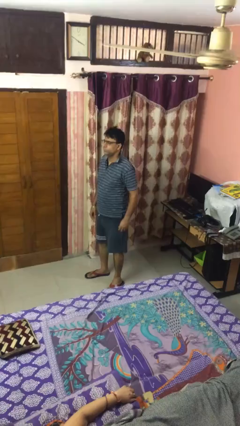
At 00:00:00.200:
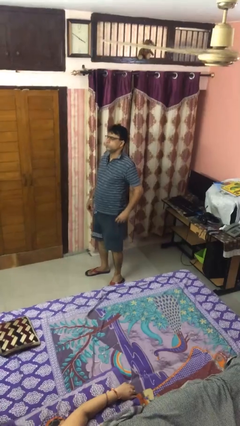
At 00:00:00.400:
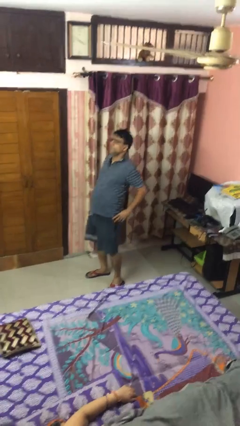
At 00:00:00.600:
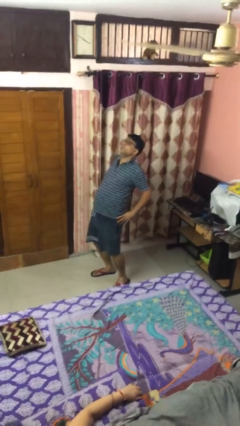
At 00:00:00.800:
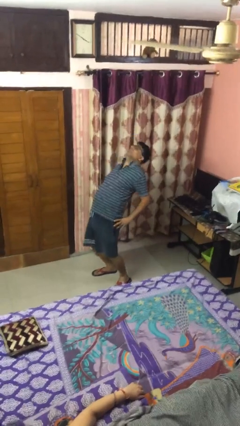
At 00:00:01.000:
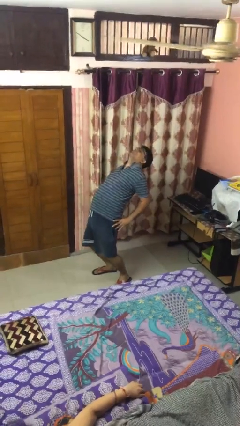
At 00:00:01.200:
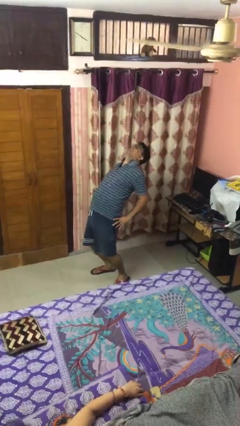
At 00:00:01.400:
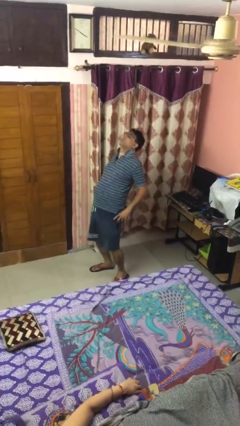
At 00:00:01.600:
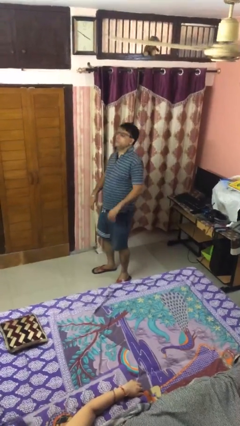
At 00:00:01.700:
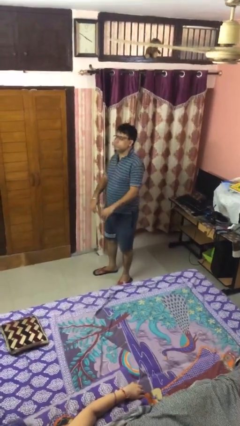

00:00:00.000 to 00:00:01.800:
person stretches back

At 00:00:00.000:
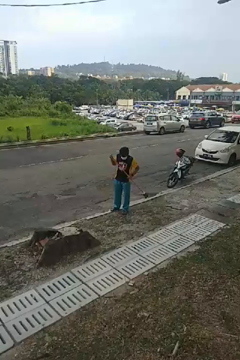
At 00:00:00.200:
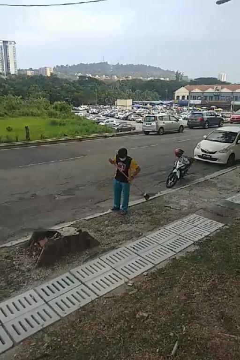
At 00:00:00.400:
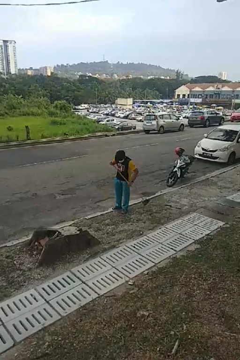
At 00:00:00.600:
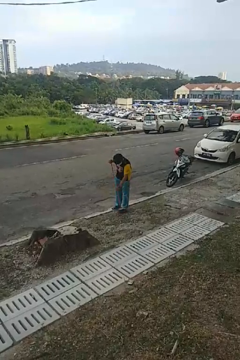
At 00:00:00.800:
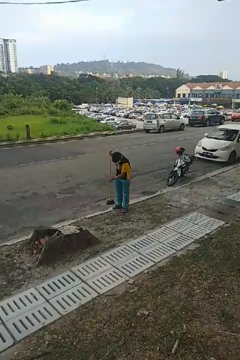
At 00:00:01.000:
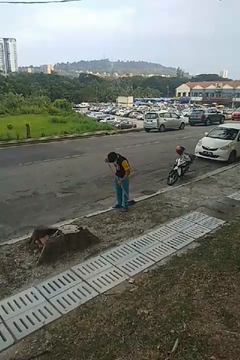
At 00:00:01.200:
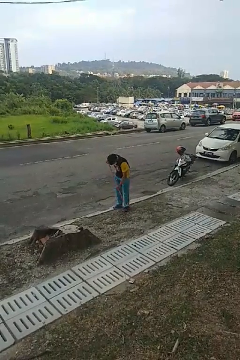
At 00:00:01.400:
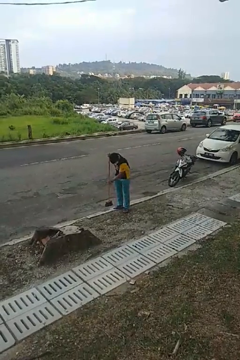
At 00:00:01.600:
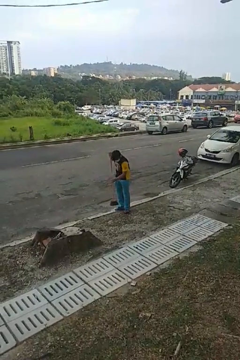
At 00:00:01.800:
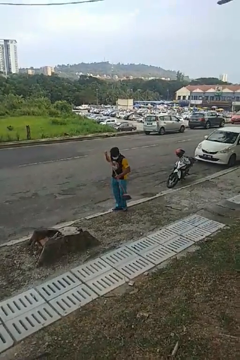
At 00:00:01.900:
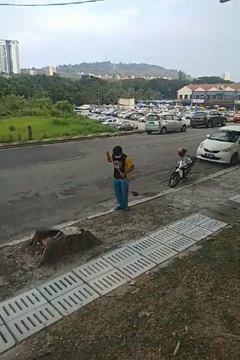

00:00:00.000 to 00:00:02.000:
person sweeps floor

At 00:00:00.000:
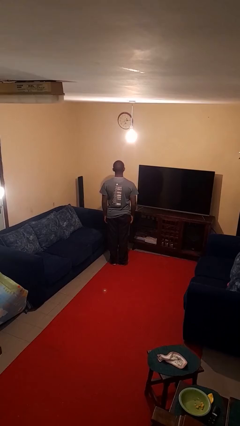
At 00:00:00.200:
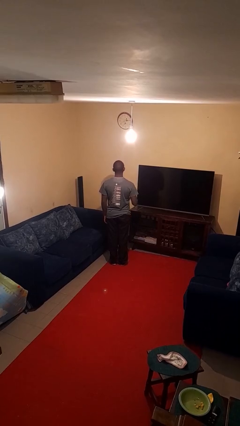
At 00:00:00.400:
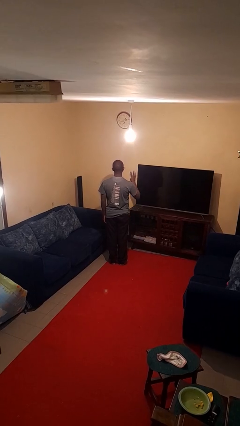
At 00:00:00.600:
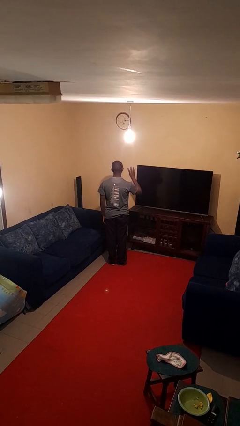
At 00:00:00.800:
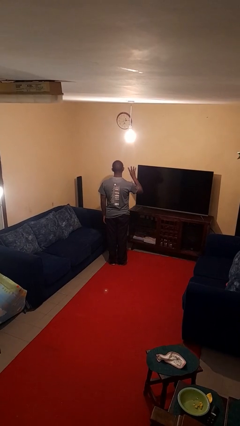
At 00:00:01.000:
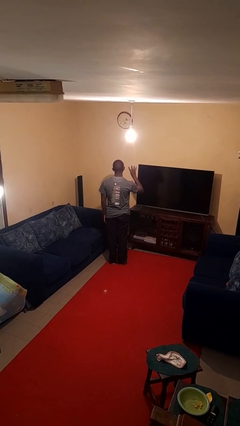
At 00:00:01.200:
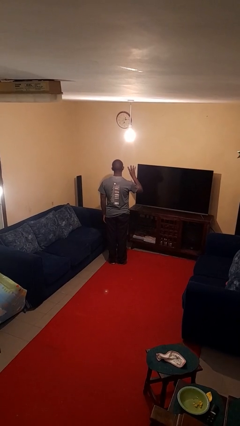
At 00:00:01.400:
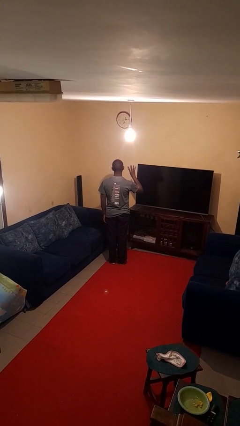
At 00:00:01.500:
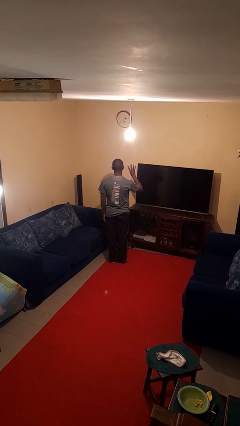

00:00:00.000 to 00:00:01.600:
person gestures number four

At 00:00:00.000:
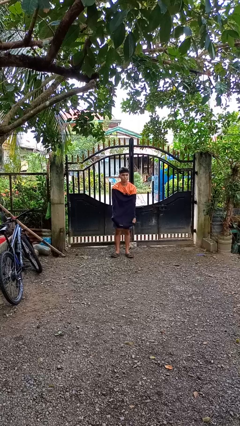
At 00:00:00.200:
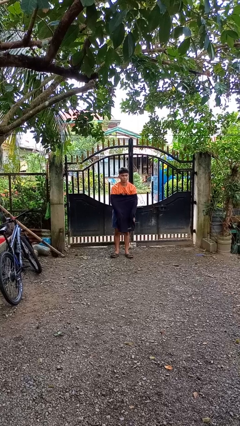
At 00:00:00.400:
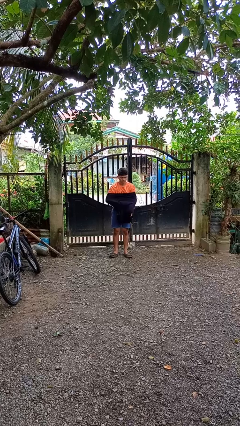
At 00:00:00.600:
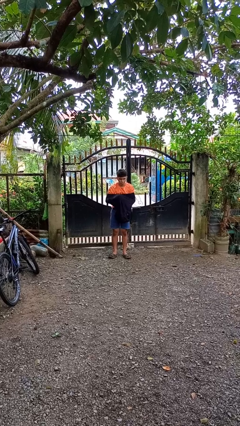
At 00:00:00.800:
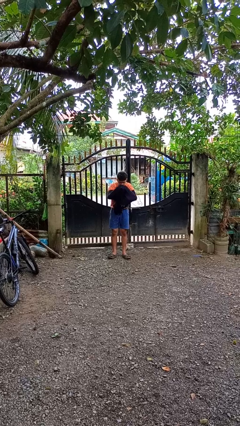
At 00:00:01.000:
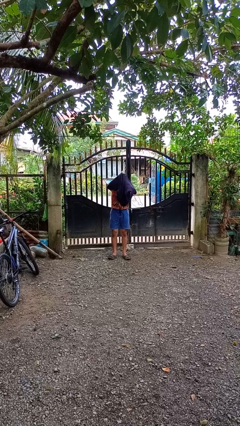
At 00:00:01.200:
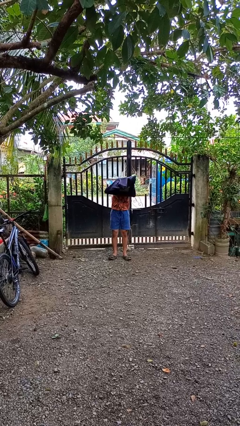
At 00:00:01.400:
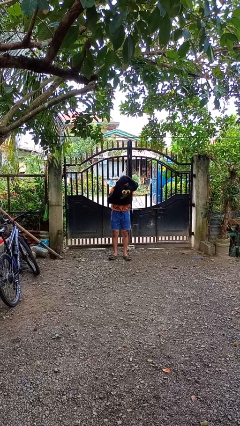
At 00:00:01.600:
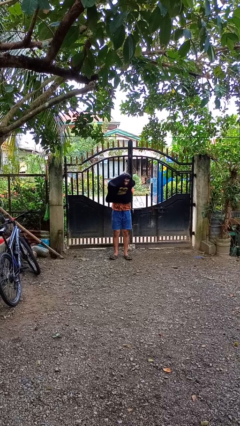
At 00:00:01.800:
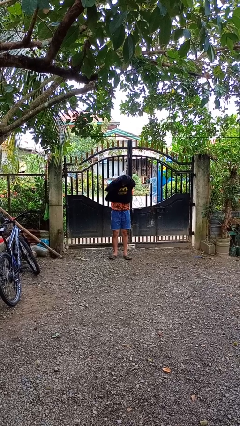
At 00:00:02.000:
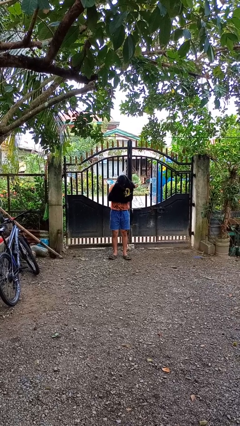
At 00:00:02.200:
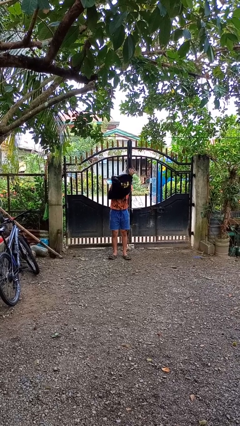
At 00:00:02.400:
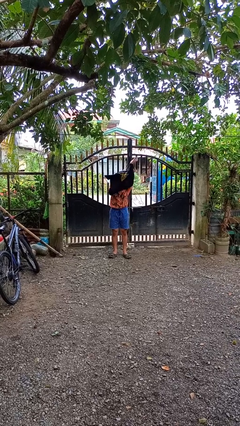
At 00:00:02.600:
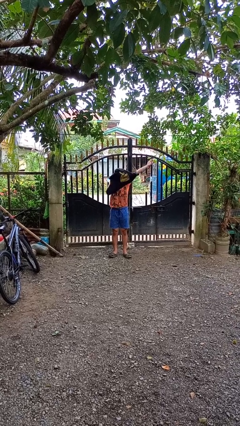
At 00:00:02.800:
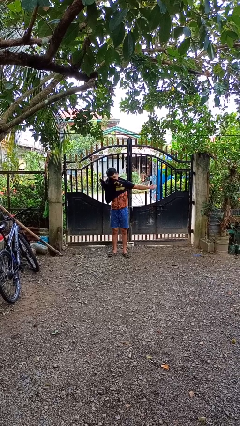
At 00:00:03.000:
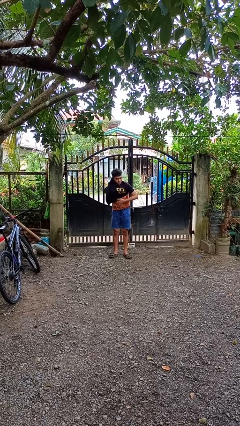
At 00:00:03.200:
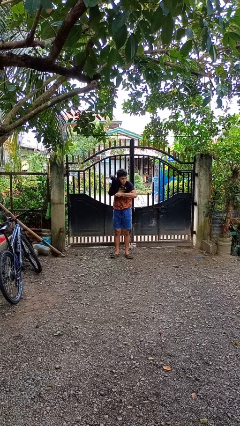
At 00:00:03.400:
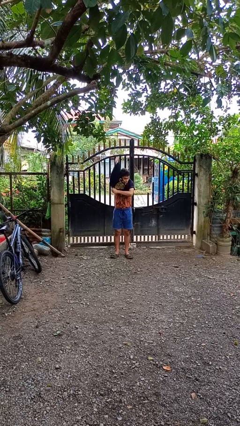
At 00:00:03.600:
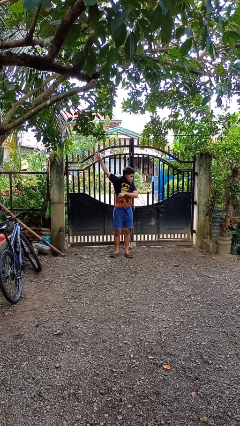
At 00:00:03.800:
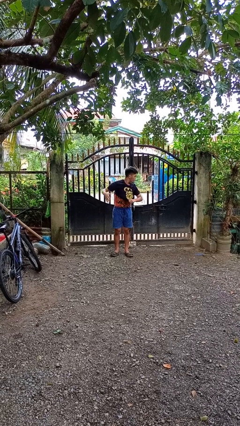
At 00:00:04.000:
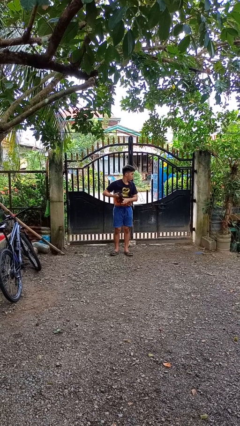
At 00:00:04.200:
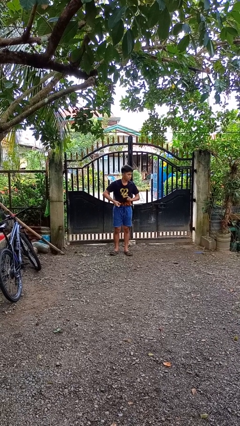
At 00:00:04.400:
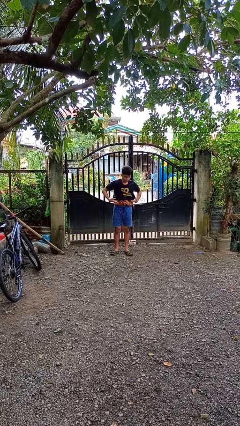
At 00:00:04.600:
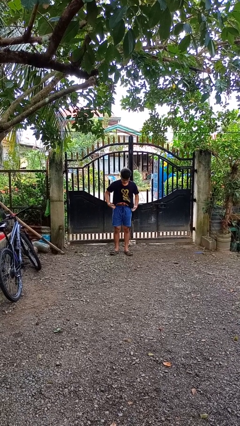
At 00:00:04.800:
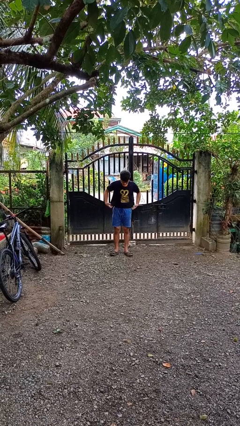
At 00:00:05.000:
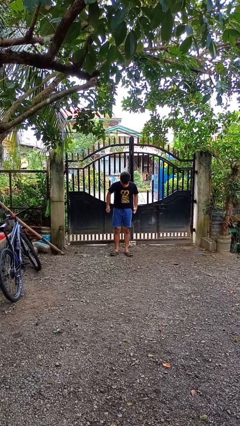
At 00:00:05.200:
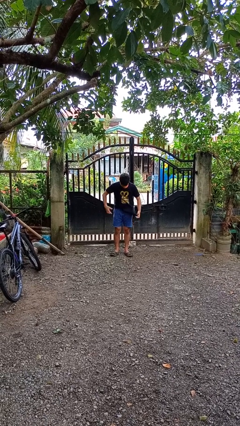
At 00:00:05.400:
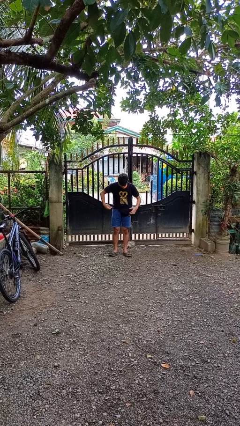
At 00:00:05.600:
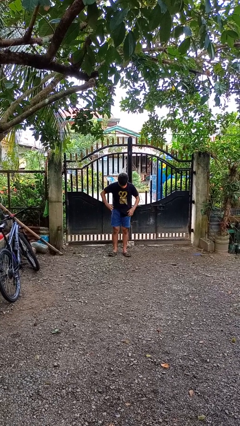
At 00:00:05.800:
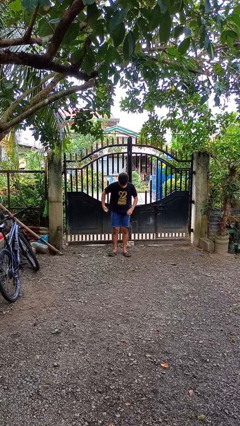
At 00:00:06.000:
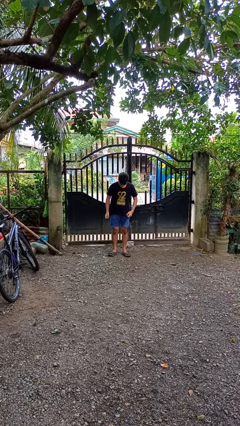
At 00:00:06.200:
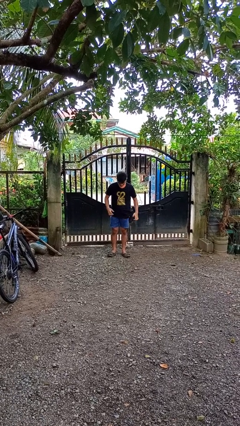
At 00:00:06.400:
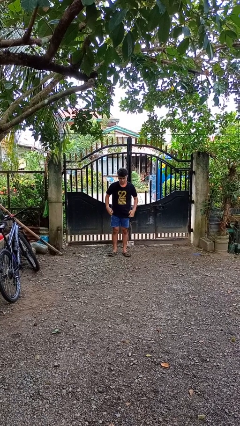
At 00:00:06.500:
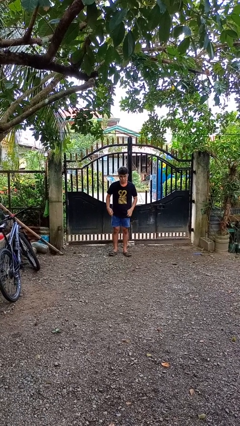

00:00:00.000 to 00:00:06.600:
person puts on shirt

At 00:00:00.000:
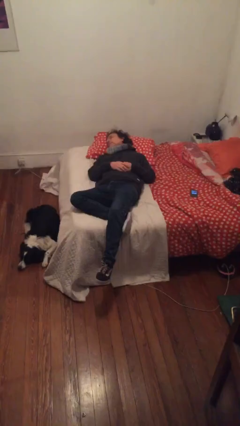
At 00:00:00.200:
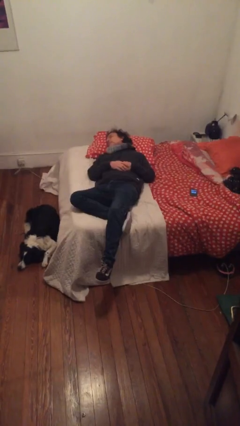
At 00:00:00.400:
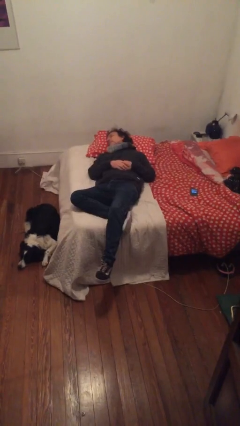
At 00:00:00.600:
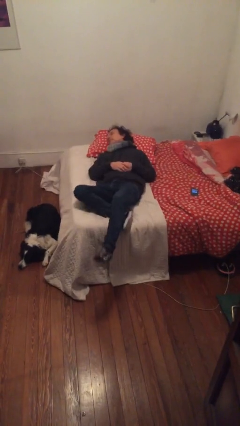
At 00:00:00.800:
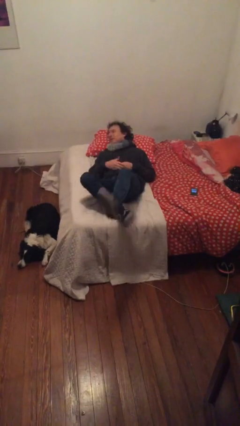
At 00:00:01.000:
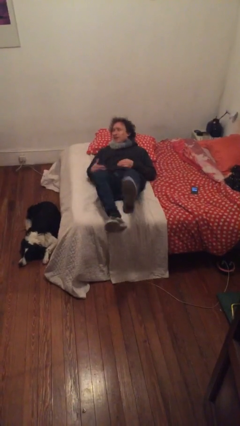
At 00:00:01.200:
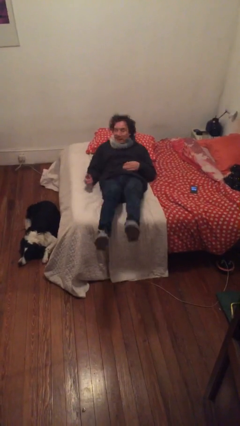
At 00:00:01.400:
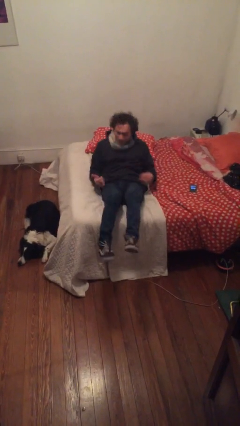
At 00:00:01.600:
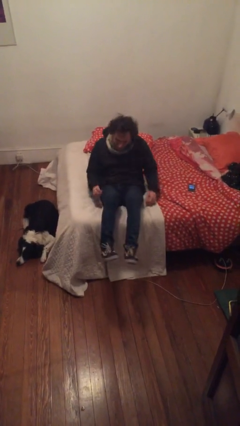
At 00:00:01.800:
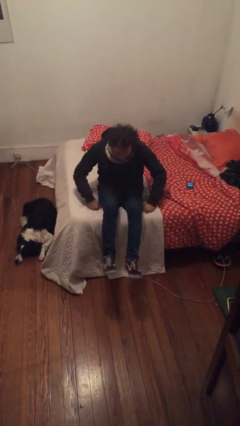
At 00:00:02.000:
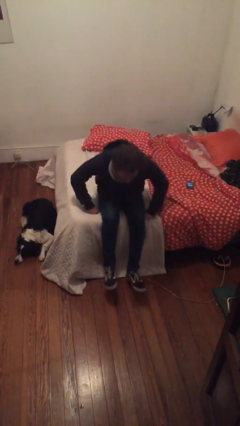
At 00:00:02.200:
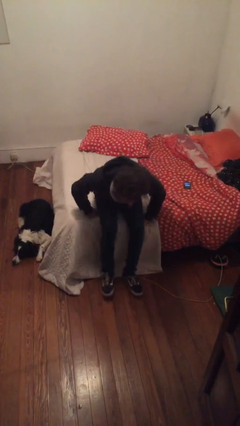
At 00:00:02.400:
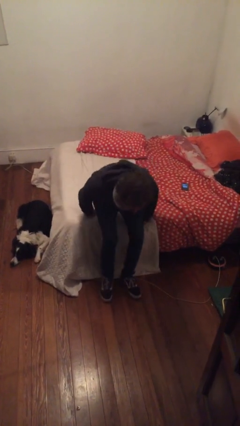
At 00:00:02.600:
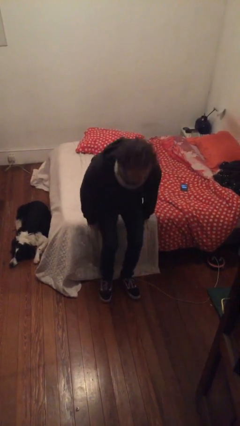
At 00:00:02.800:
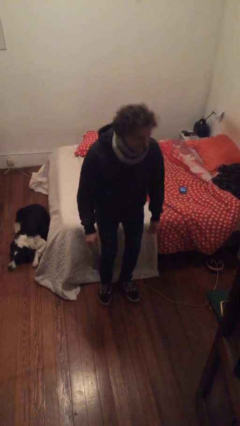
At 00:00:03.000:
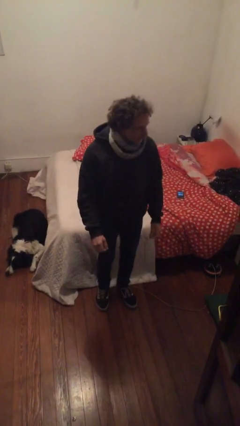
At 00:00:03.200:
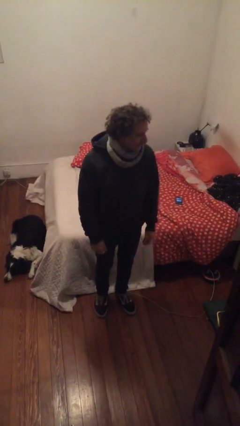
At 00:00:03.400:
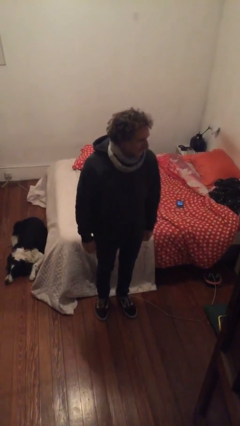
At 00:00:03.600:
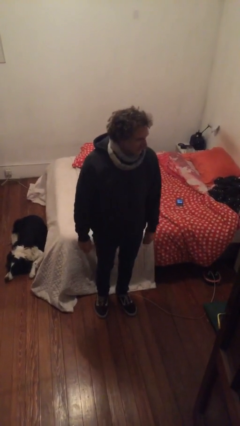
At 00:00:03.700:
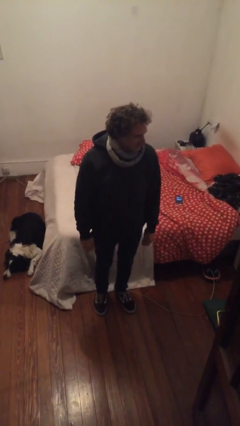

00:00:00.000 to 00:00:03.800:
person stands up

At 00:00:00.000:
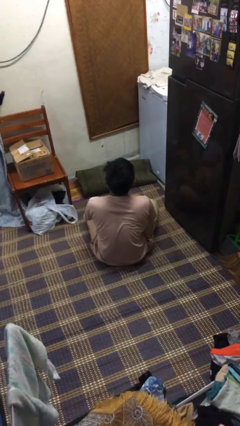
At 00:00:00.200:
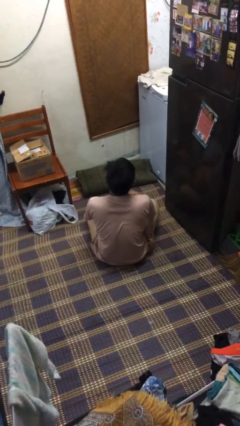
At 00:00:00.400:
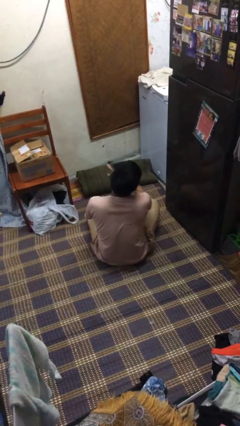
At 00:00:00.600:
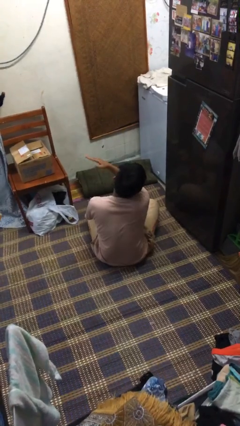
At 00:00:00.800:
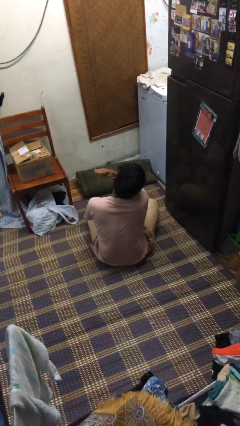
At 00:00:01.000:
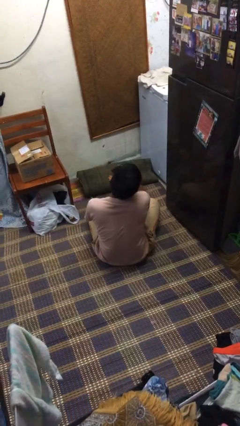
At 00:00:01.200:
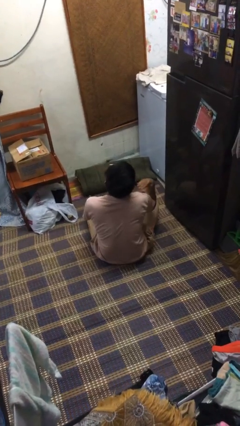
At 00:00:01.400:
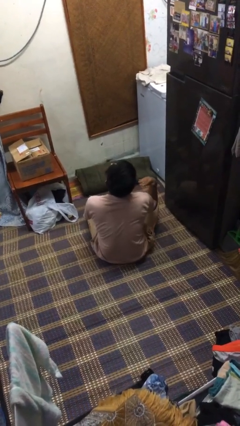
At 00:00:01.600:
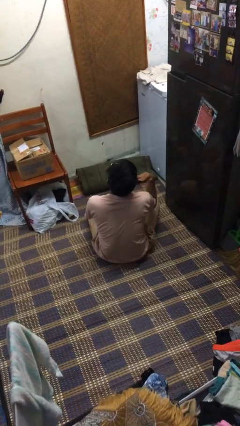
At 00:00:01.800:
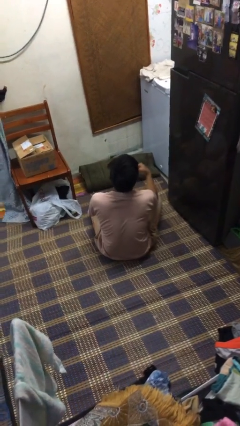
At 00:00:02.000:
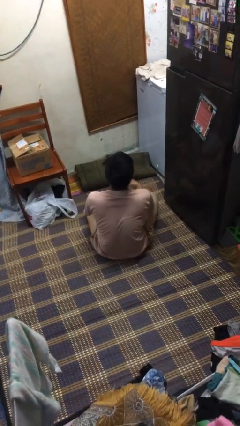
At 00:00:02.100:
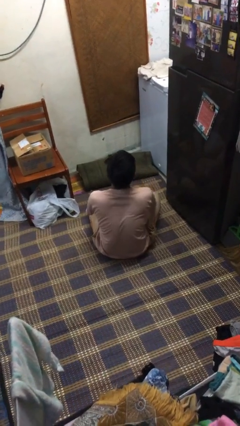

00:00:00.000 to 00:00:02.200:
person gestures cut
